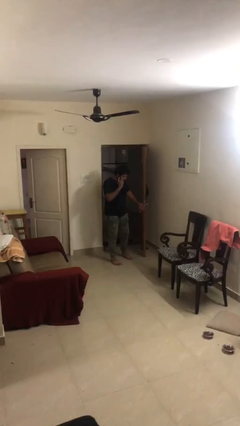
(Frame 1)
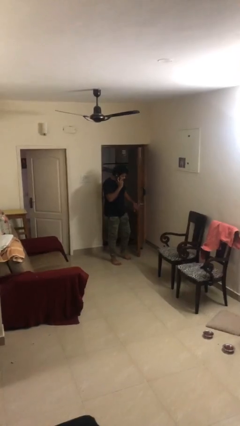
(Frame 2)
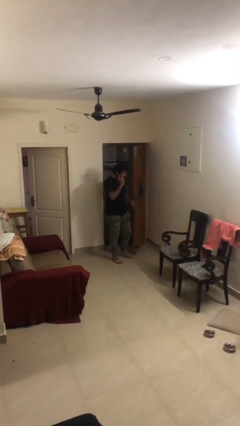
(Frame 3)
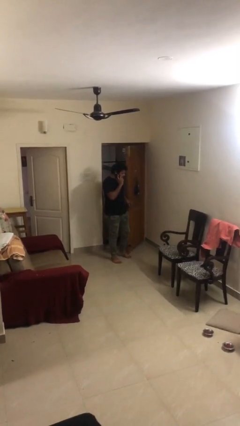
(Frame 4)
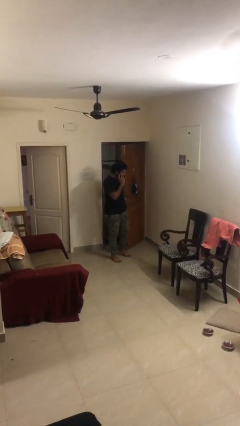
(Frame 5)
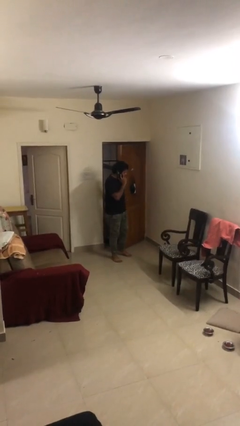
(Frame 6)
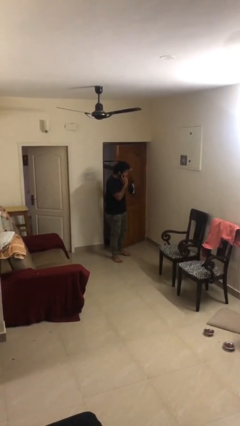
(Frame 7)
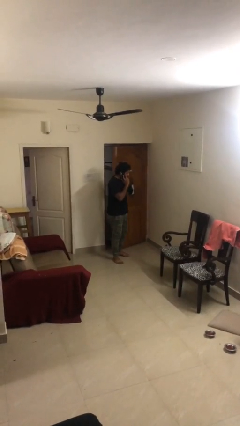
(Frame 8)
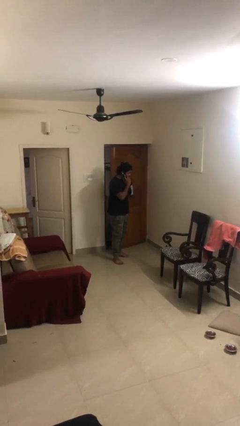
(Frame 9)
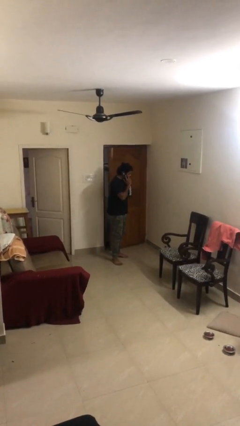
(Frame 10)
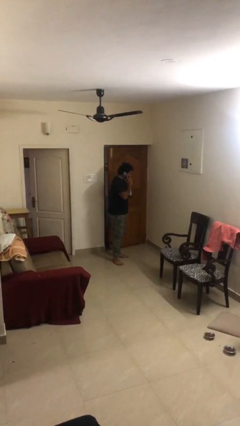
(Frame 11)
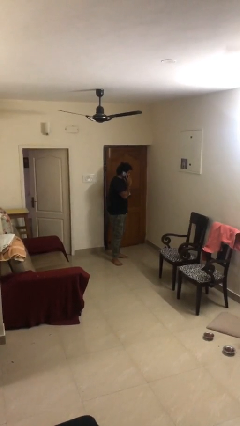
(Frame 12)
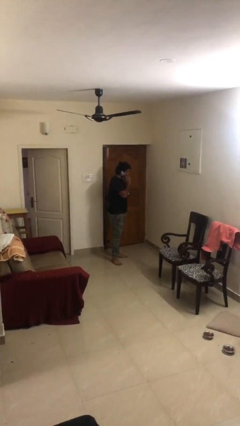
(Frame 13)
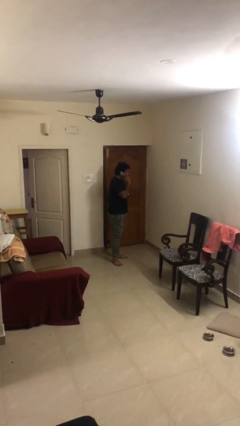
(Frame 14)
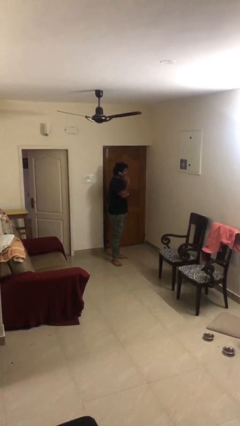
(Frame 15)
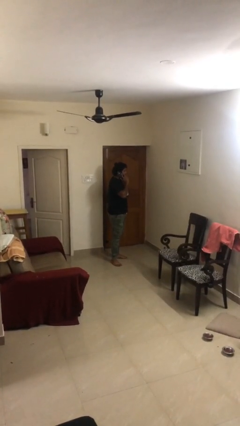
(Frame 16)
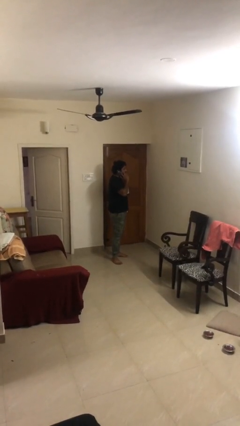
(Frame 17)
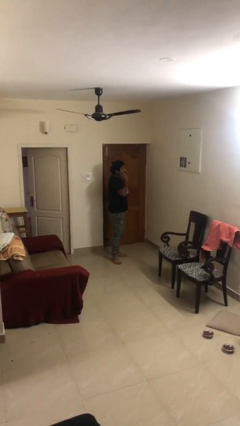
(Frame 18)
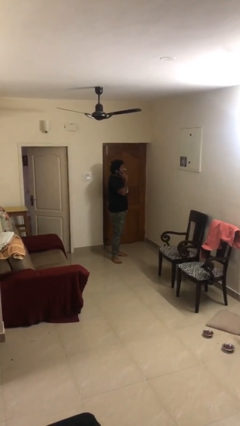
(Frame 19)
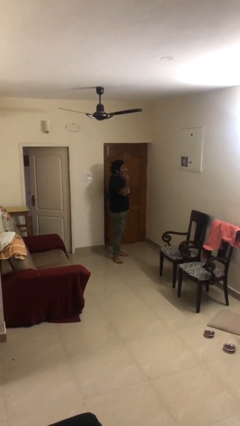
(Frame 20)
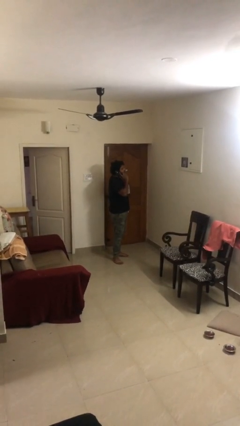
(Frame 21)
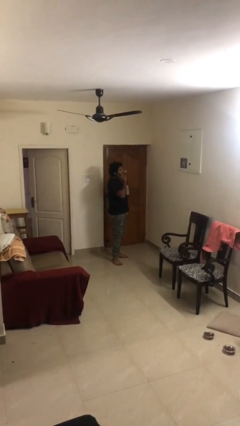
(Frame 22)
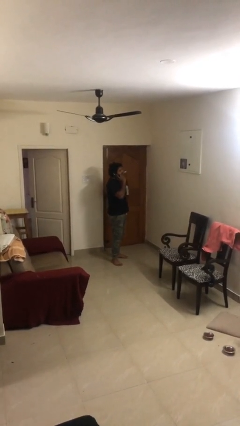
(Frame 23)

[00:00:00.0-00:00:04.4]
person closes facility door

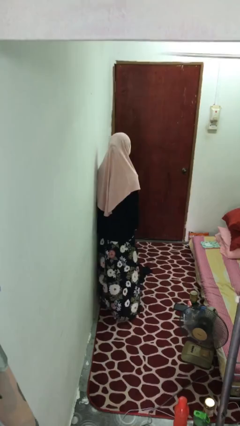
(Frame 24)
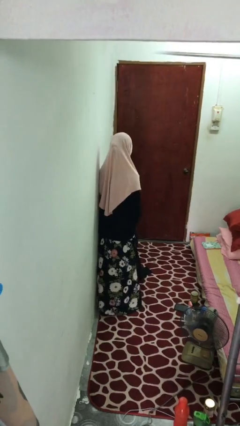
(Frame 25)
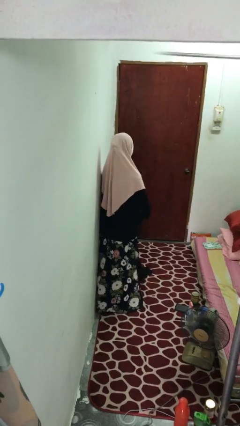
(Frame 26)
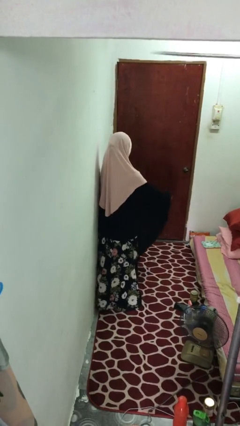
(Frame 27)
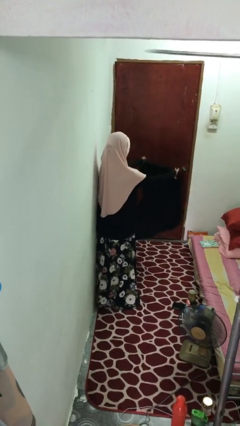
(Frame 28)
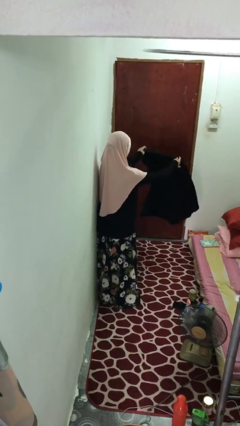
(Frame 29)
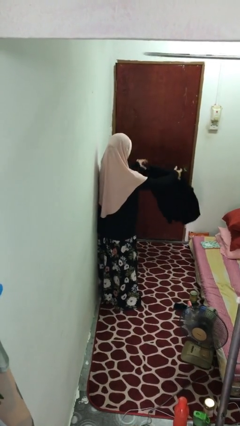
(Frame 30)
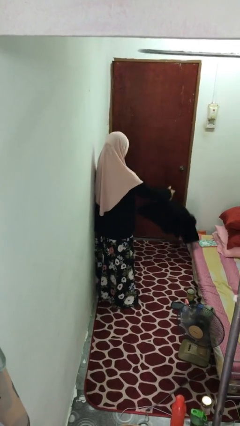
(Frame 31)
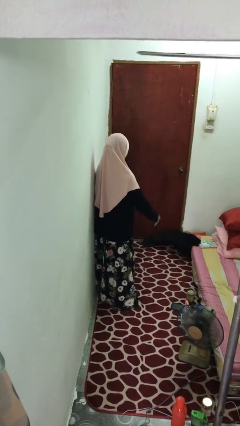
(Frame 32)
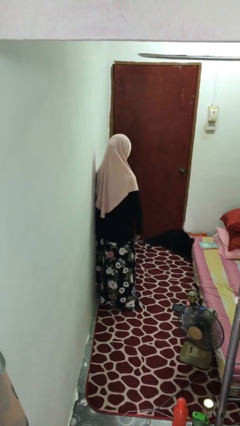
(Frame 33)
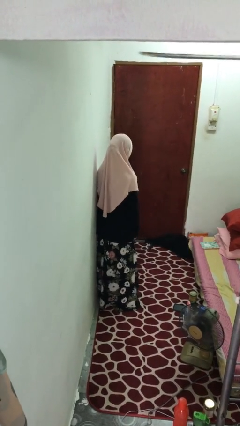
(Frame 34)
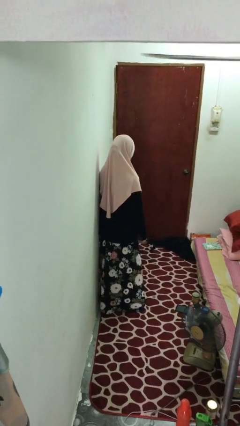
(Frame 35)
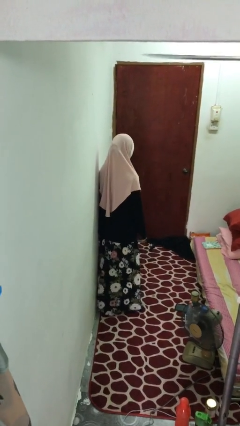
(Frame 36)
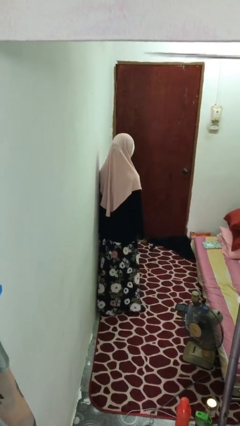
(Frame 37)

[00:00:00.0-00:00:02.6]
person throws object to ground

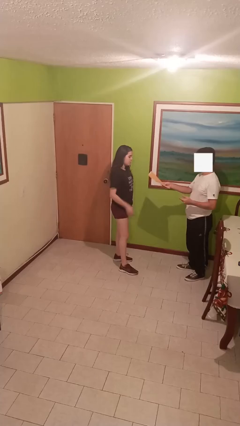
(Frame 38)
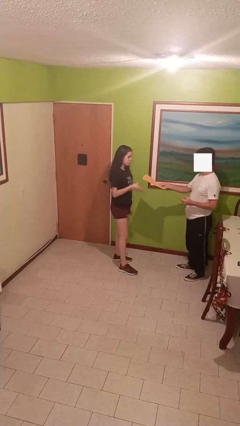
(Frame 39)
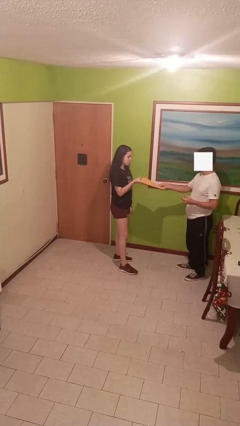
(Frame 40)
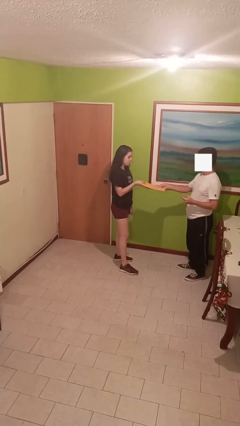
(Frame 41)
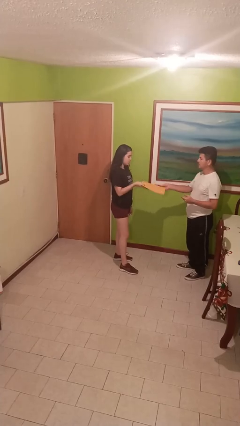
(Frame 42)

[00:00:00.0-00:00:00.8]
person transfers object to person

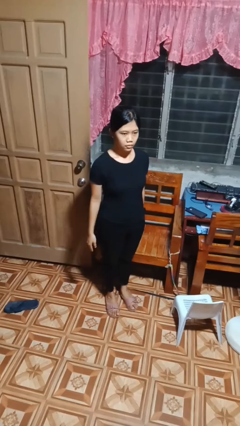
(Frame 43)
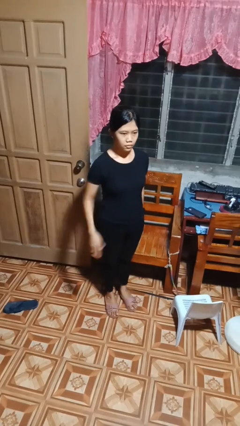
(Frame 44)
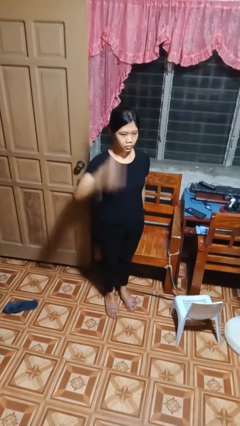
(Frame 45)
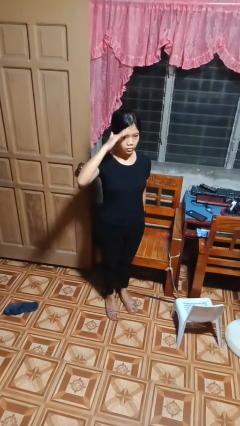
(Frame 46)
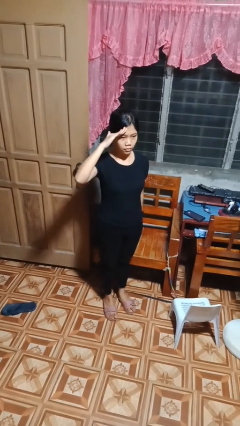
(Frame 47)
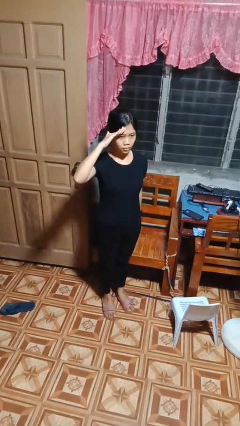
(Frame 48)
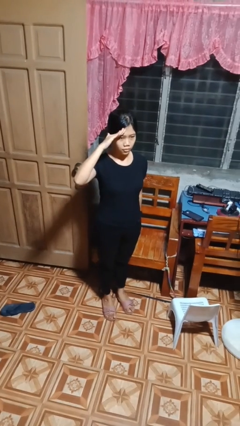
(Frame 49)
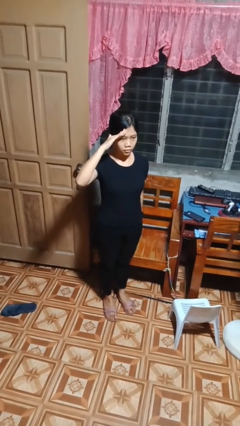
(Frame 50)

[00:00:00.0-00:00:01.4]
person salutes

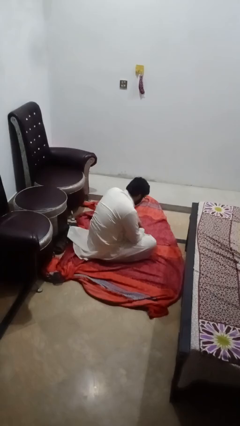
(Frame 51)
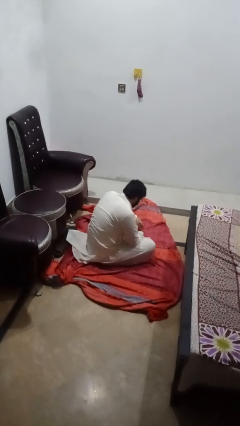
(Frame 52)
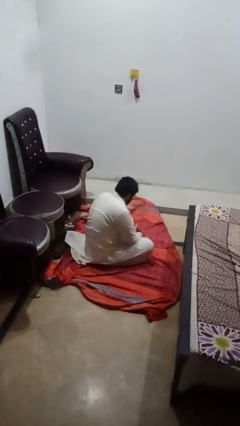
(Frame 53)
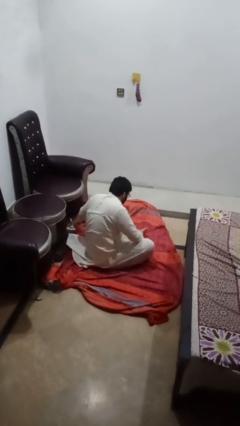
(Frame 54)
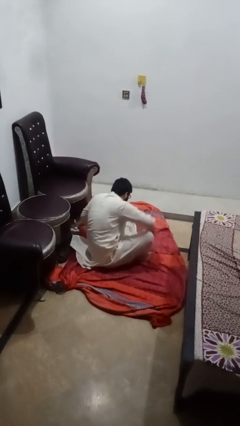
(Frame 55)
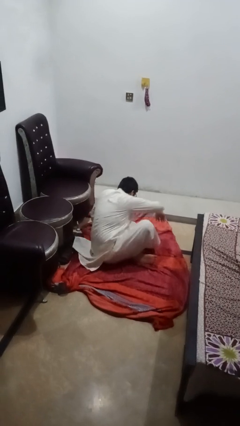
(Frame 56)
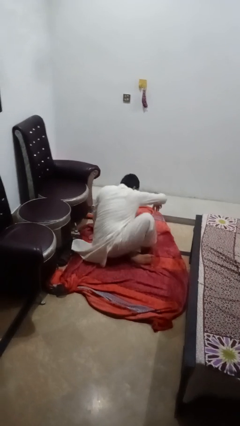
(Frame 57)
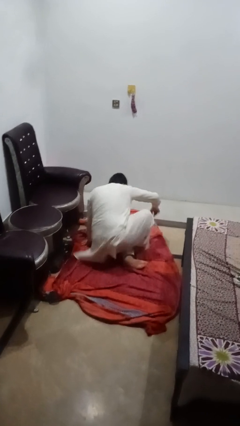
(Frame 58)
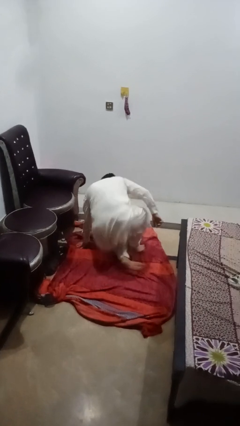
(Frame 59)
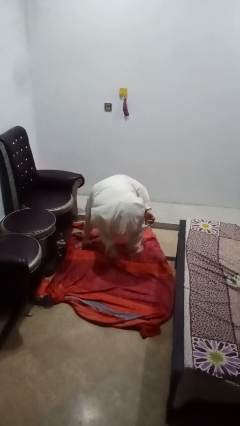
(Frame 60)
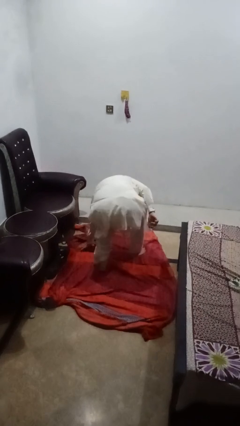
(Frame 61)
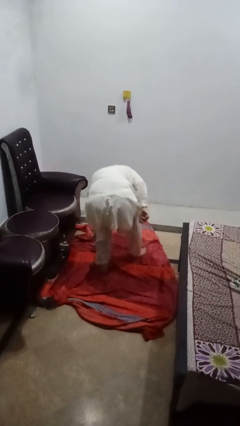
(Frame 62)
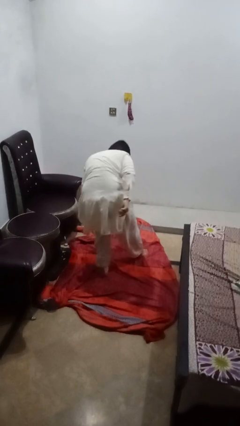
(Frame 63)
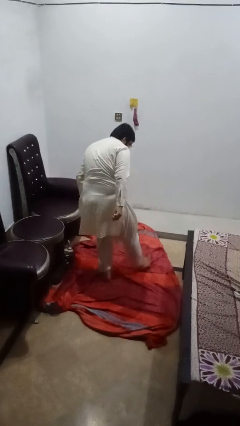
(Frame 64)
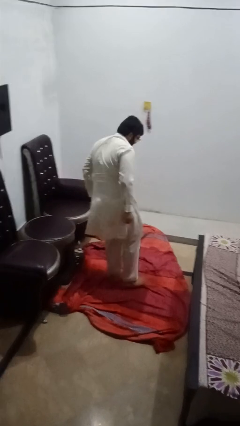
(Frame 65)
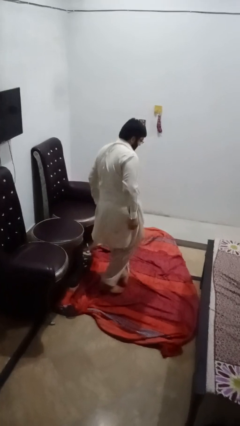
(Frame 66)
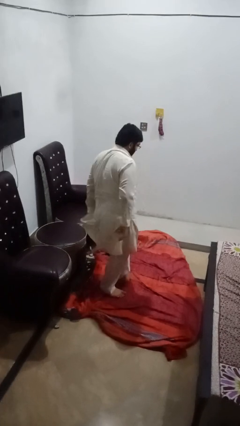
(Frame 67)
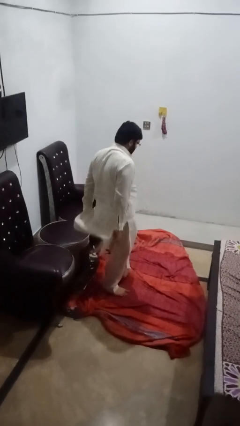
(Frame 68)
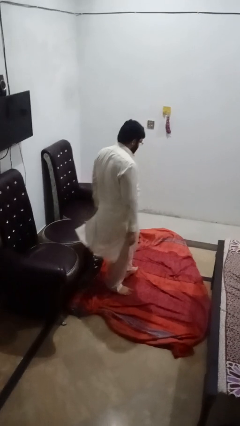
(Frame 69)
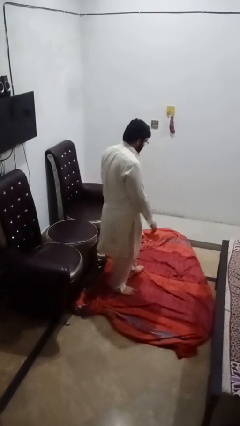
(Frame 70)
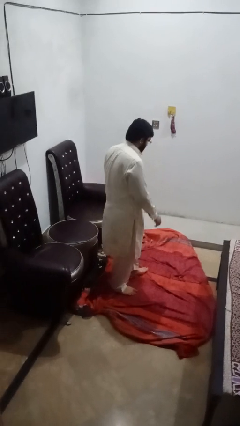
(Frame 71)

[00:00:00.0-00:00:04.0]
person stands up from floor

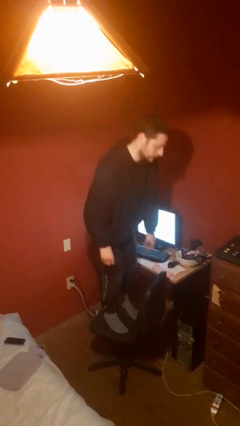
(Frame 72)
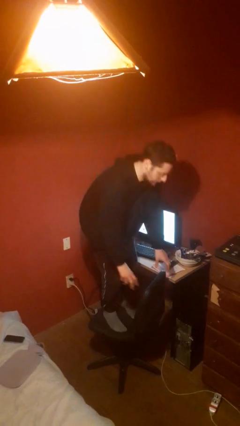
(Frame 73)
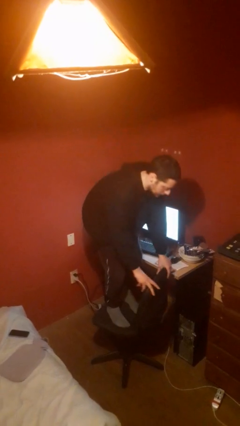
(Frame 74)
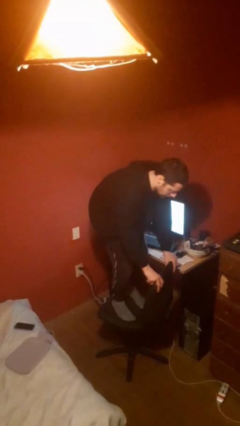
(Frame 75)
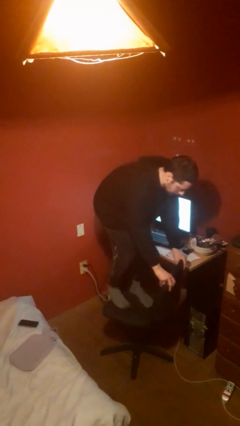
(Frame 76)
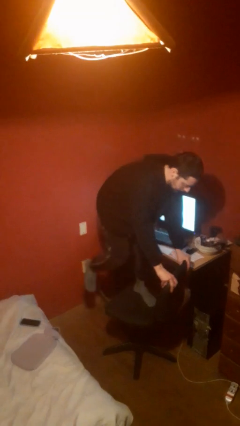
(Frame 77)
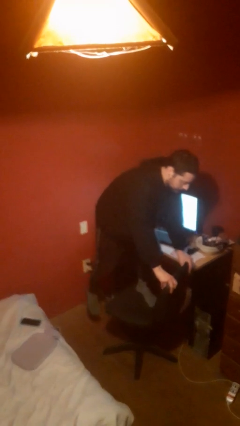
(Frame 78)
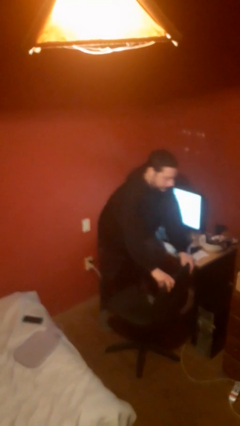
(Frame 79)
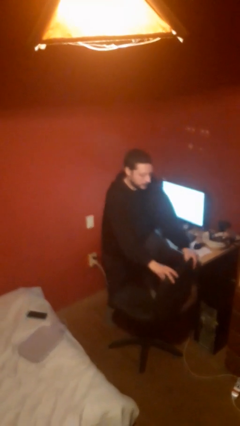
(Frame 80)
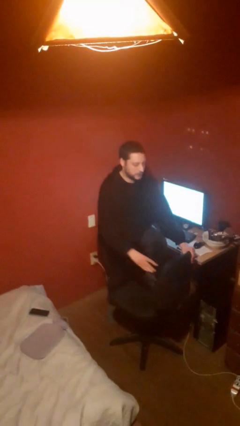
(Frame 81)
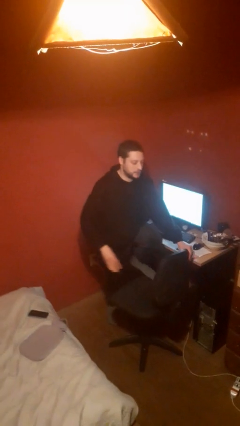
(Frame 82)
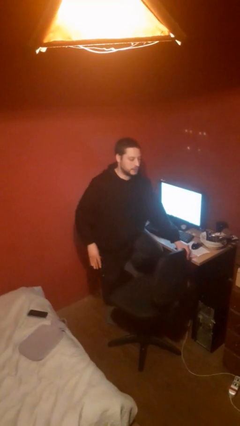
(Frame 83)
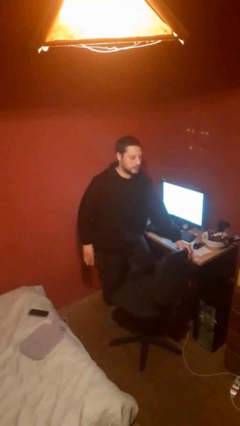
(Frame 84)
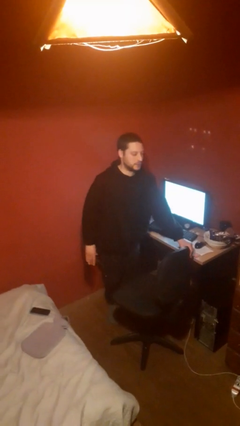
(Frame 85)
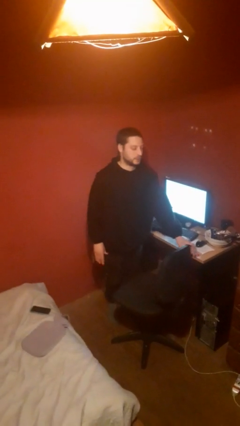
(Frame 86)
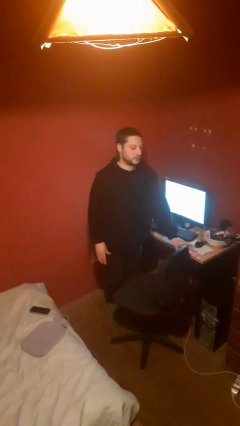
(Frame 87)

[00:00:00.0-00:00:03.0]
person climbs off chair

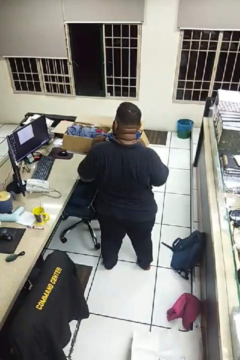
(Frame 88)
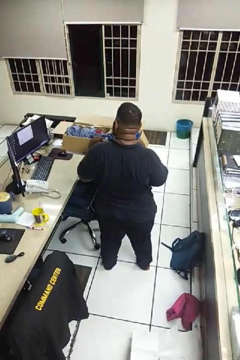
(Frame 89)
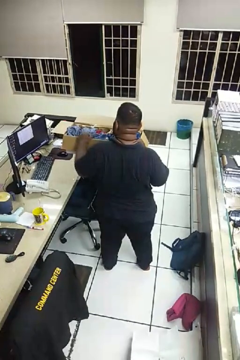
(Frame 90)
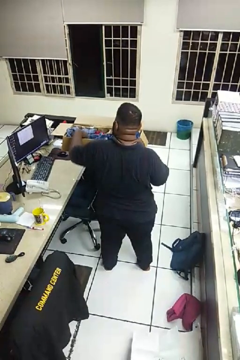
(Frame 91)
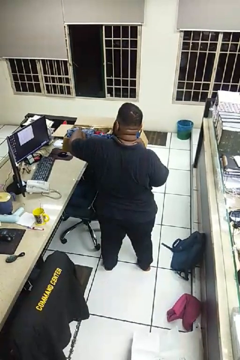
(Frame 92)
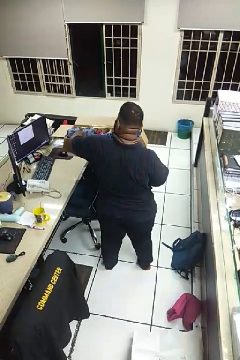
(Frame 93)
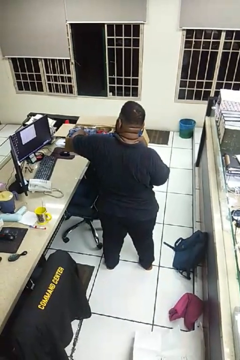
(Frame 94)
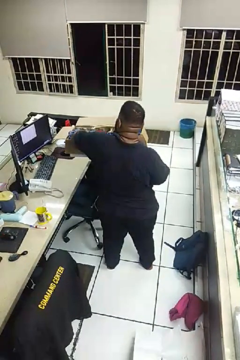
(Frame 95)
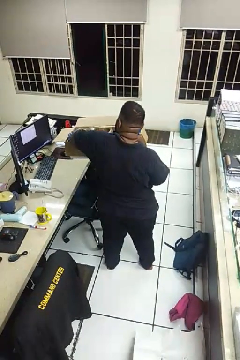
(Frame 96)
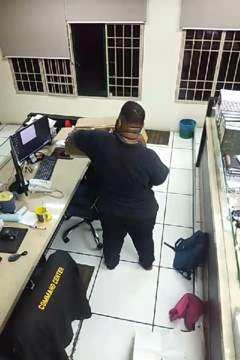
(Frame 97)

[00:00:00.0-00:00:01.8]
person searches in box
